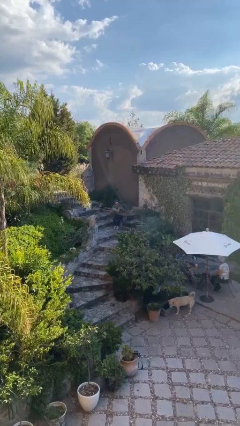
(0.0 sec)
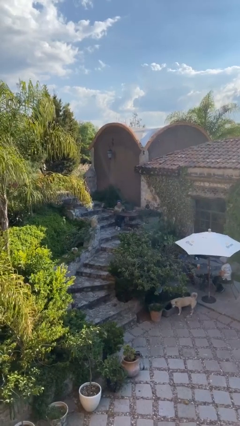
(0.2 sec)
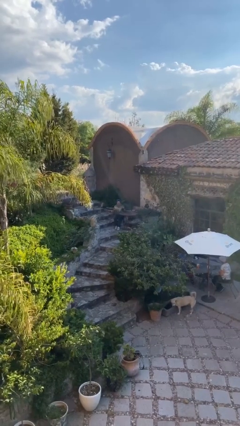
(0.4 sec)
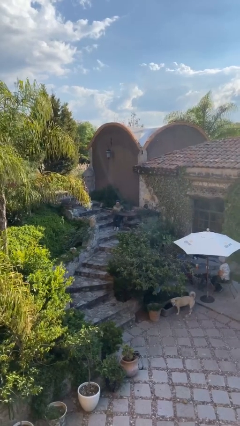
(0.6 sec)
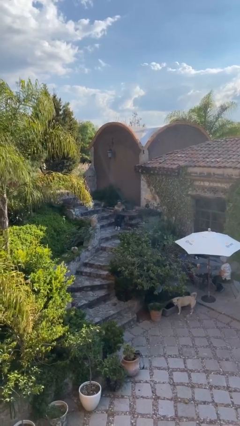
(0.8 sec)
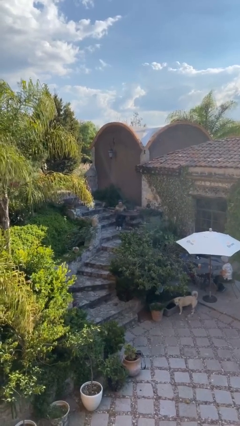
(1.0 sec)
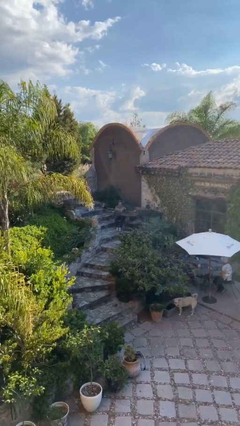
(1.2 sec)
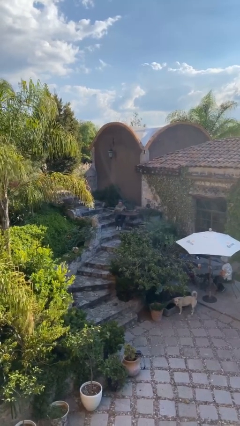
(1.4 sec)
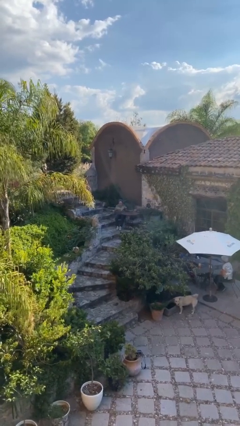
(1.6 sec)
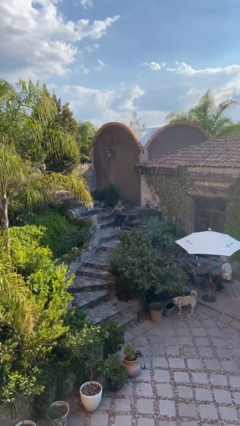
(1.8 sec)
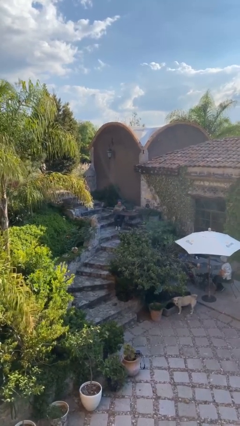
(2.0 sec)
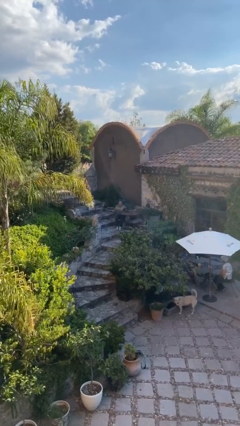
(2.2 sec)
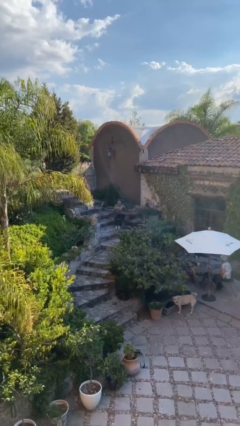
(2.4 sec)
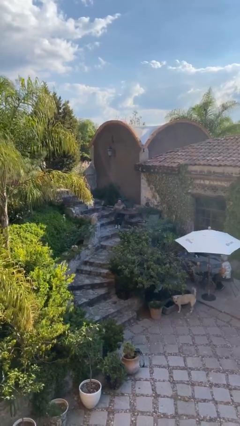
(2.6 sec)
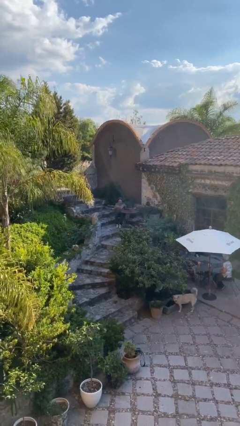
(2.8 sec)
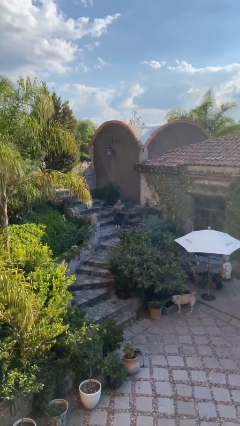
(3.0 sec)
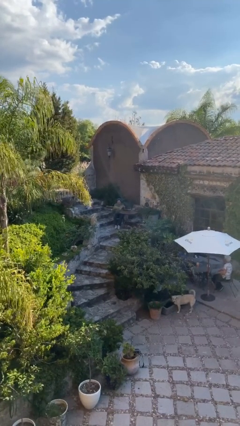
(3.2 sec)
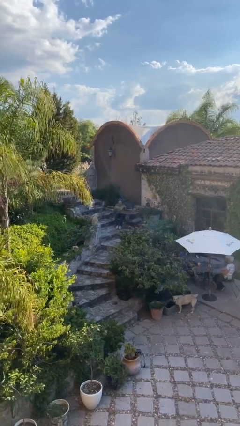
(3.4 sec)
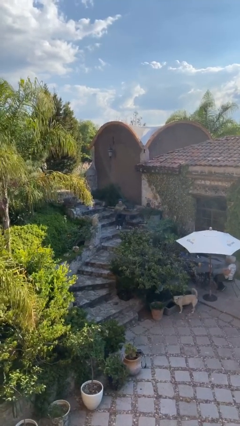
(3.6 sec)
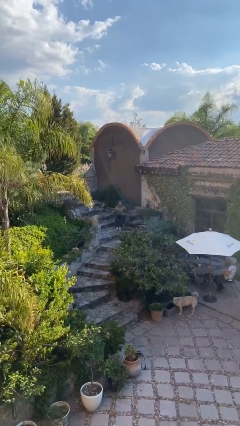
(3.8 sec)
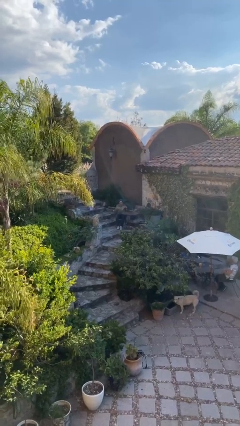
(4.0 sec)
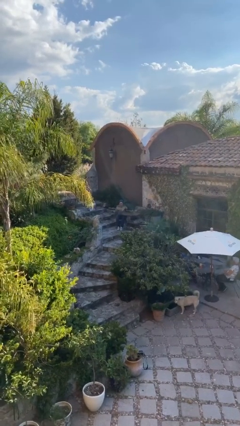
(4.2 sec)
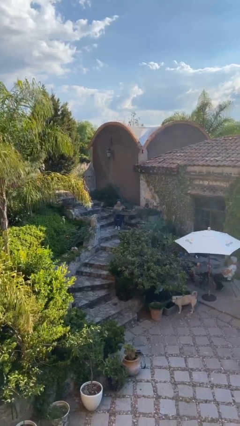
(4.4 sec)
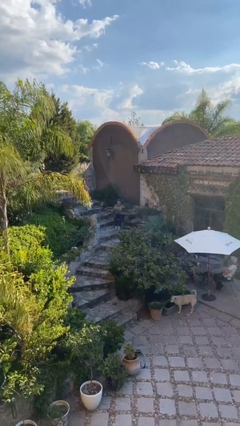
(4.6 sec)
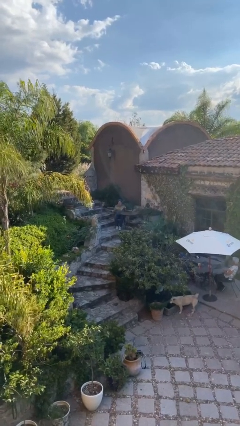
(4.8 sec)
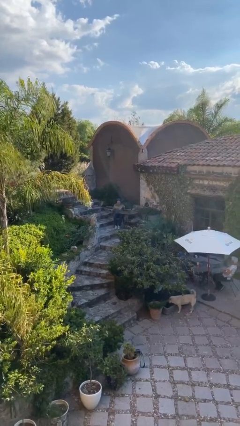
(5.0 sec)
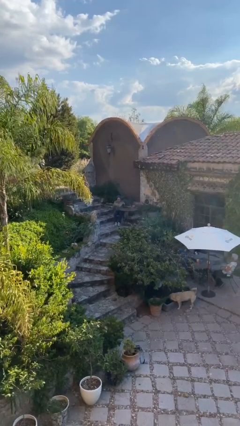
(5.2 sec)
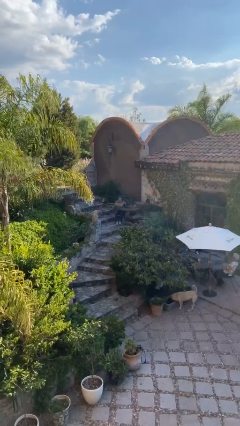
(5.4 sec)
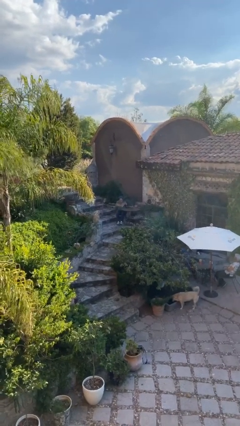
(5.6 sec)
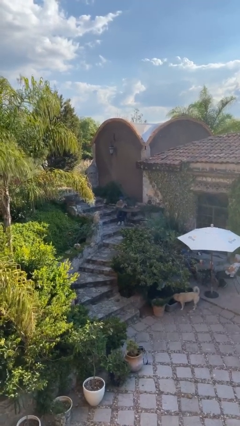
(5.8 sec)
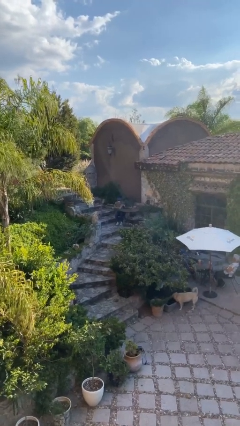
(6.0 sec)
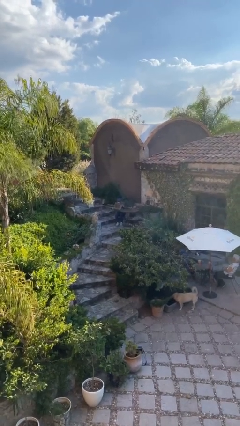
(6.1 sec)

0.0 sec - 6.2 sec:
person reads document

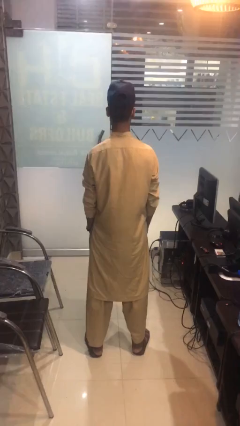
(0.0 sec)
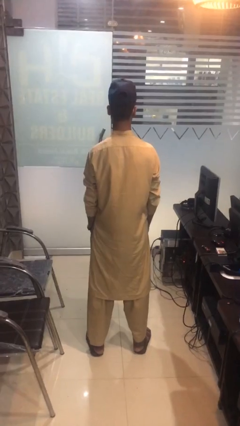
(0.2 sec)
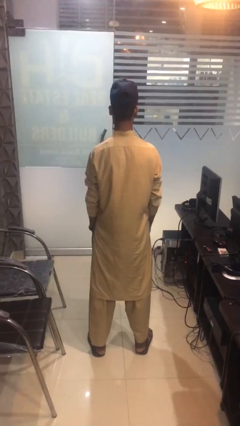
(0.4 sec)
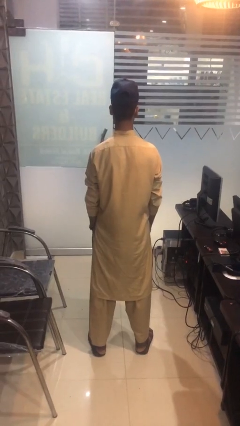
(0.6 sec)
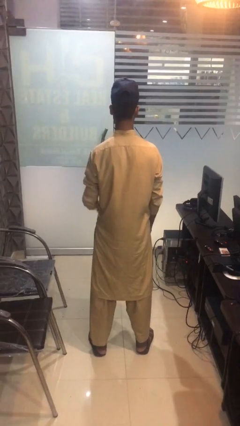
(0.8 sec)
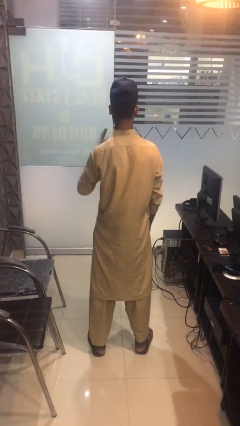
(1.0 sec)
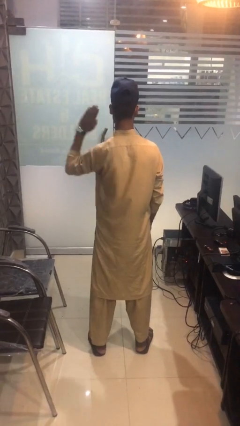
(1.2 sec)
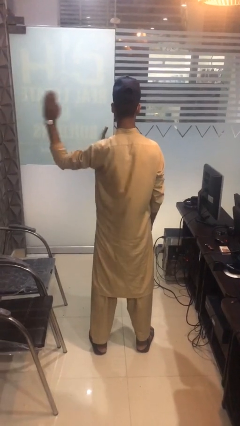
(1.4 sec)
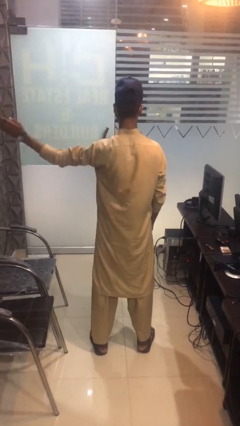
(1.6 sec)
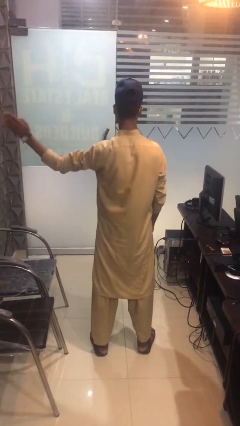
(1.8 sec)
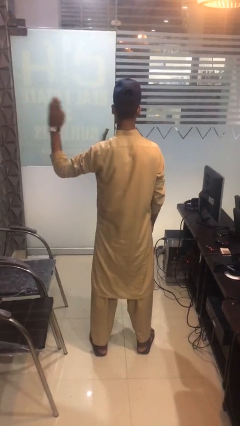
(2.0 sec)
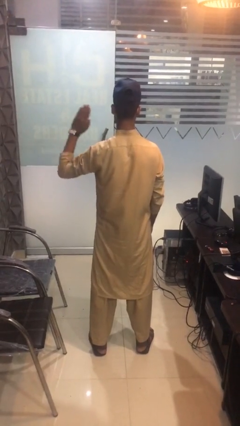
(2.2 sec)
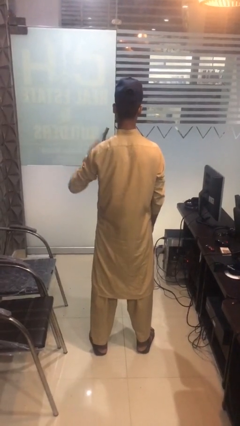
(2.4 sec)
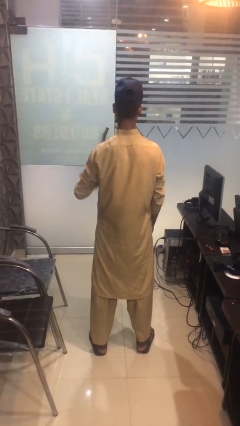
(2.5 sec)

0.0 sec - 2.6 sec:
person gestures swipe left

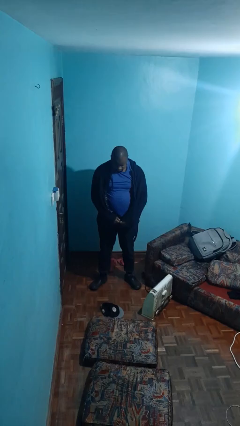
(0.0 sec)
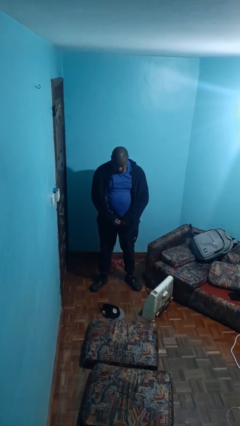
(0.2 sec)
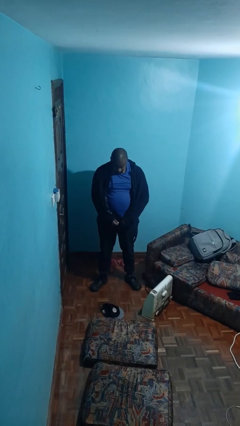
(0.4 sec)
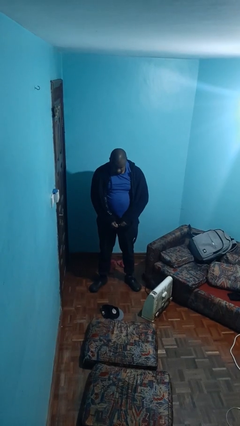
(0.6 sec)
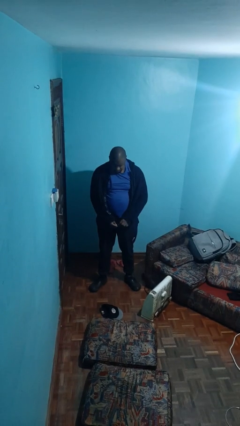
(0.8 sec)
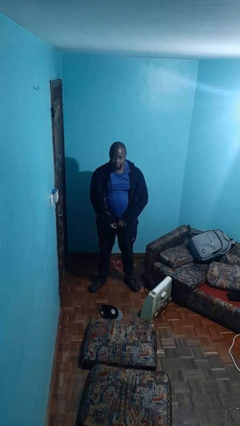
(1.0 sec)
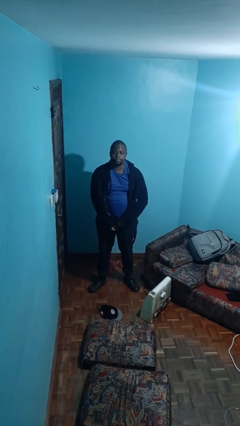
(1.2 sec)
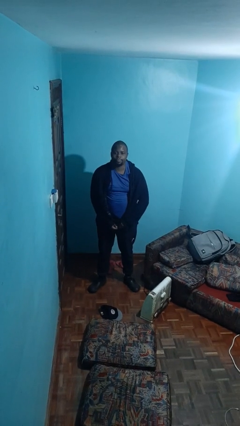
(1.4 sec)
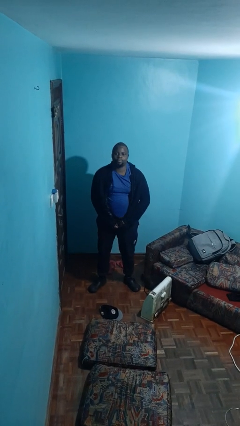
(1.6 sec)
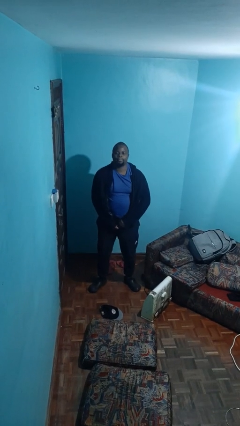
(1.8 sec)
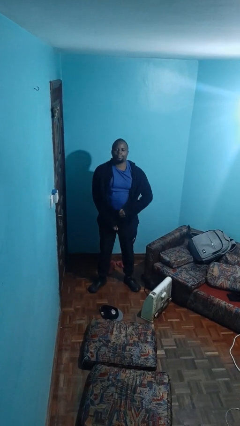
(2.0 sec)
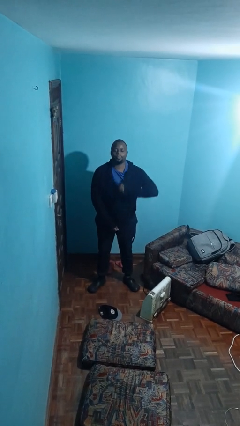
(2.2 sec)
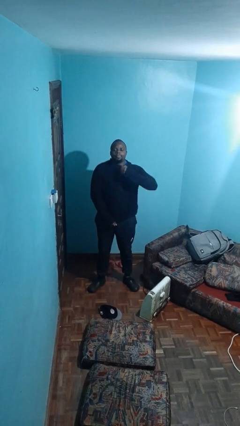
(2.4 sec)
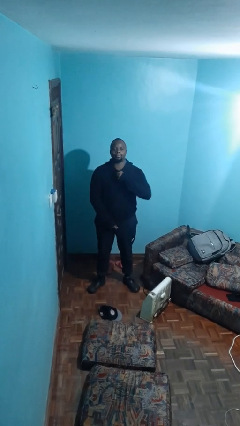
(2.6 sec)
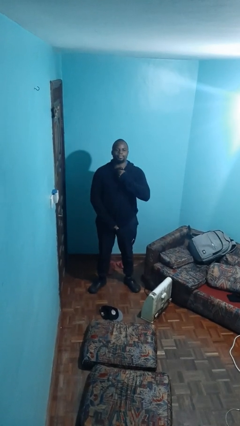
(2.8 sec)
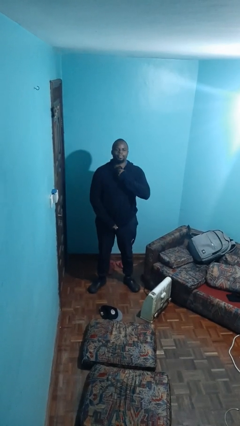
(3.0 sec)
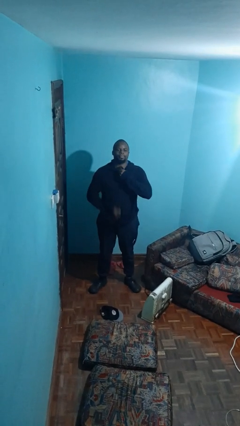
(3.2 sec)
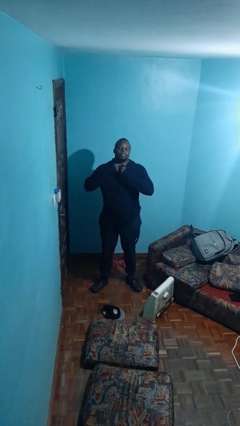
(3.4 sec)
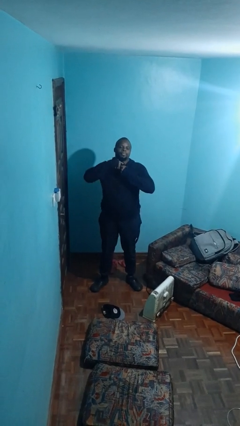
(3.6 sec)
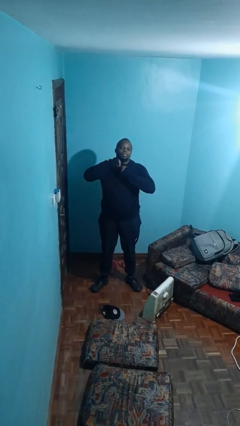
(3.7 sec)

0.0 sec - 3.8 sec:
person zips up jacket

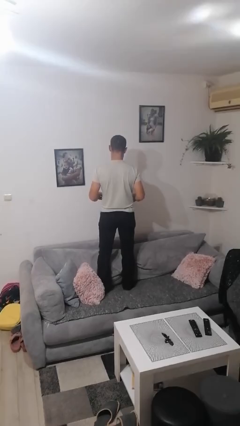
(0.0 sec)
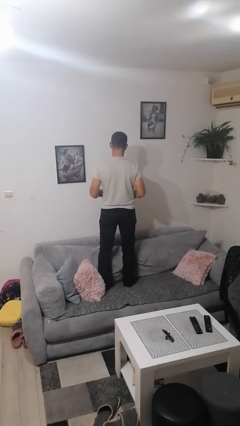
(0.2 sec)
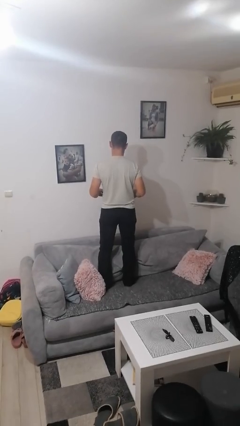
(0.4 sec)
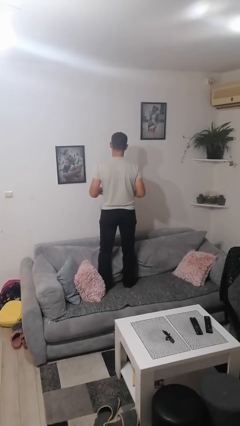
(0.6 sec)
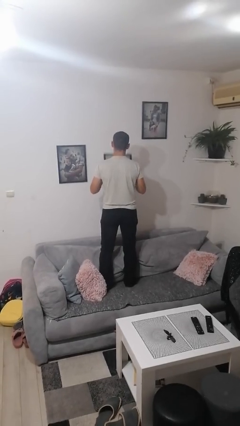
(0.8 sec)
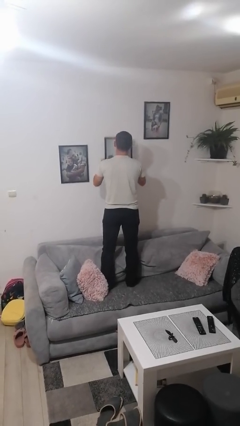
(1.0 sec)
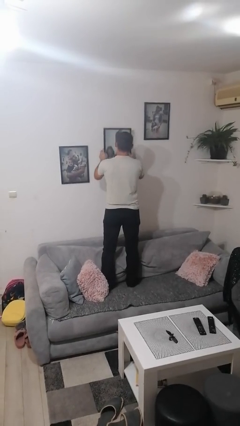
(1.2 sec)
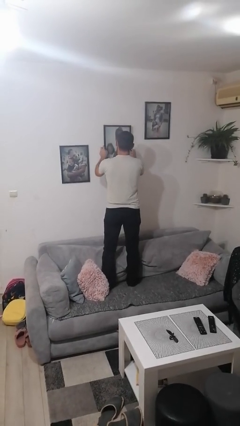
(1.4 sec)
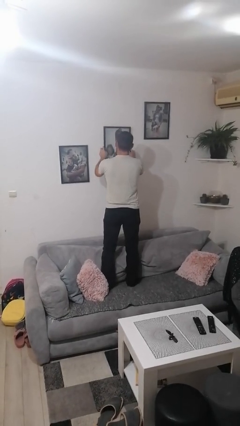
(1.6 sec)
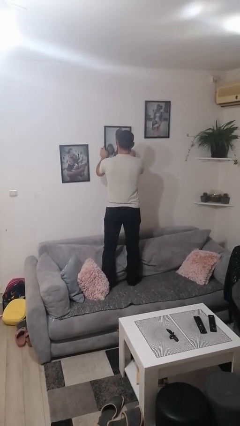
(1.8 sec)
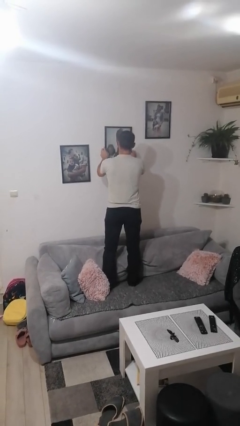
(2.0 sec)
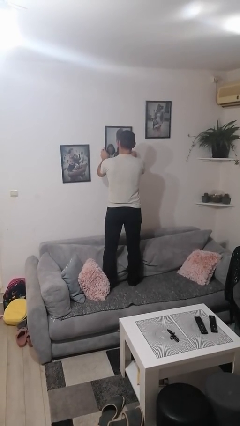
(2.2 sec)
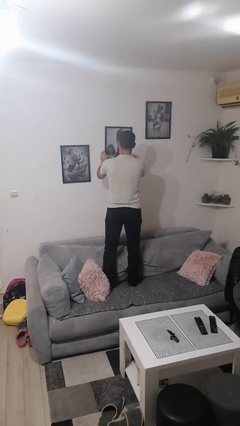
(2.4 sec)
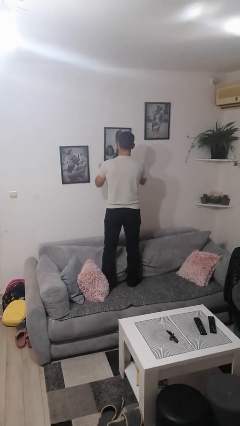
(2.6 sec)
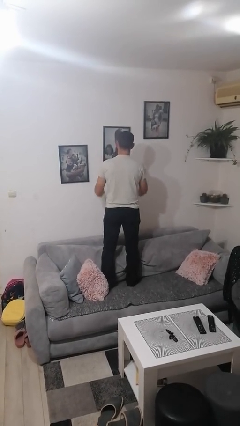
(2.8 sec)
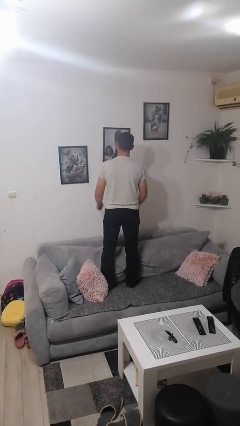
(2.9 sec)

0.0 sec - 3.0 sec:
person puts up picture frame

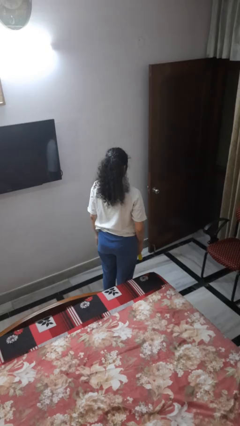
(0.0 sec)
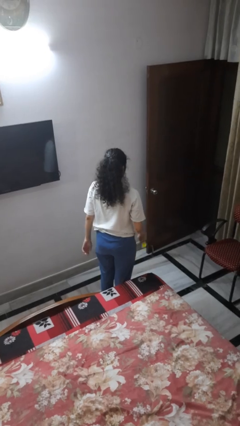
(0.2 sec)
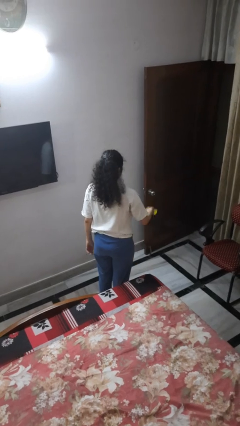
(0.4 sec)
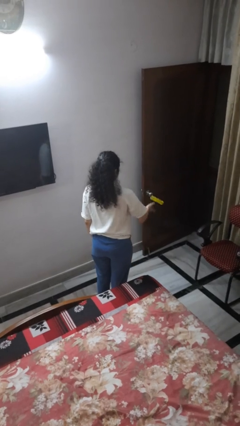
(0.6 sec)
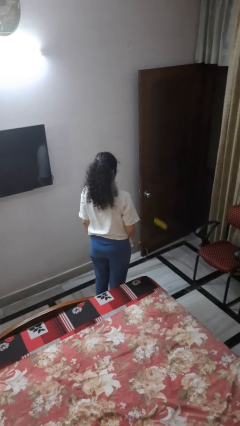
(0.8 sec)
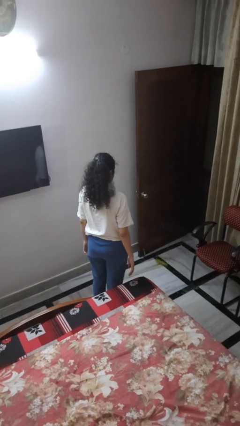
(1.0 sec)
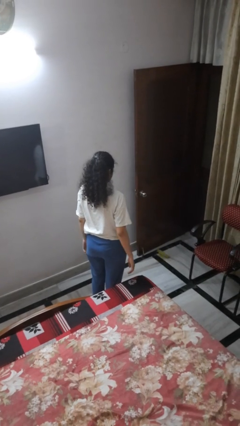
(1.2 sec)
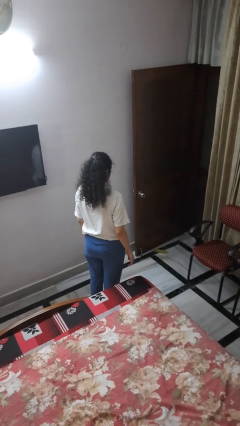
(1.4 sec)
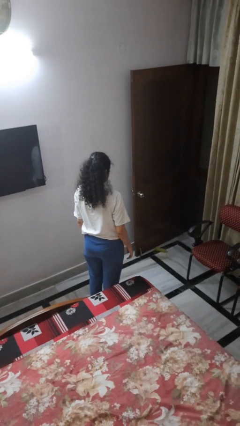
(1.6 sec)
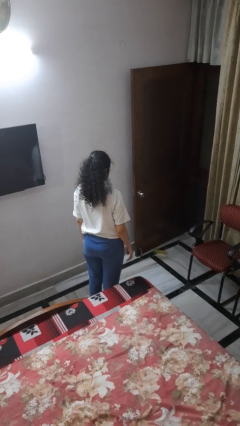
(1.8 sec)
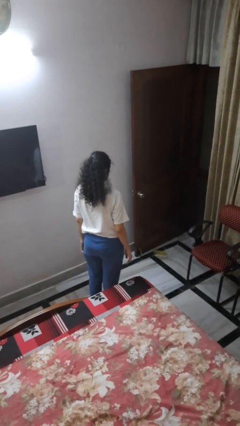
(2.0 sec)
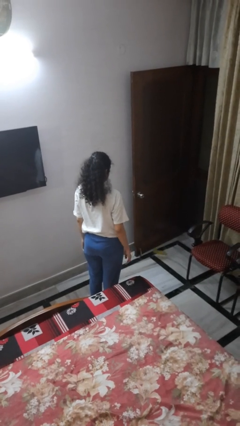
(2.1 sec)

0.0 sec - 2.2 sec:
person throws object to ground
